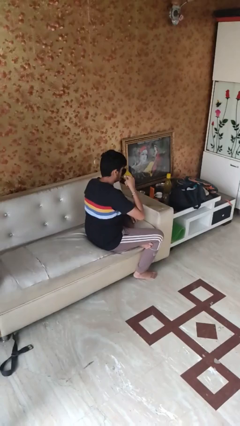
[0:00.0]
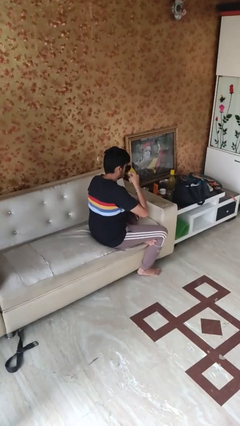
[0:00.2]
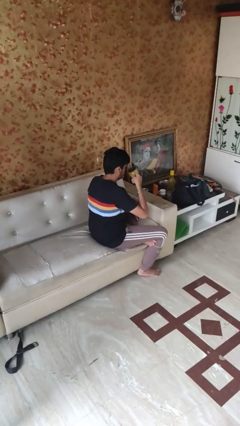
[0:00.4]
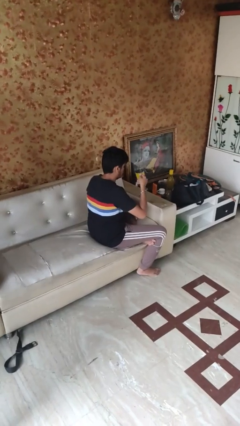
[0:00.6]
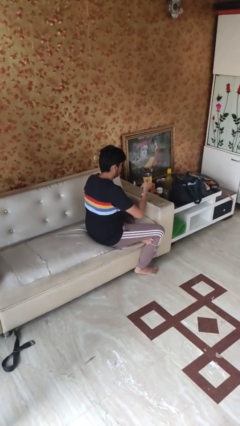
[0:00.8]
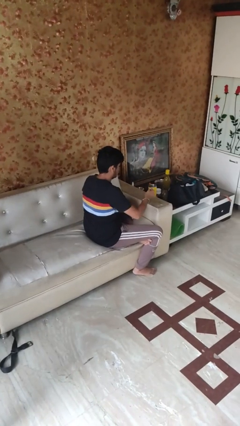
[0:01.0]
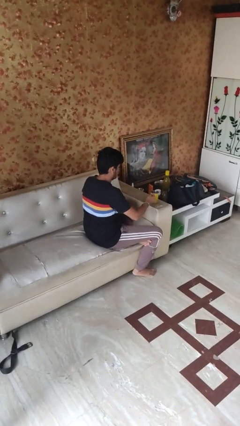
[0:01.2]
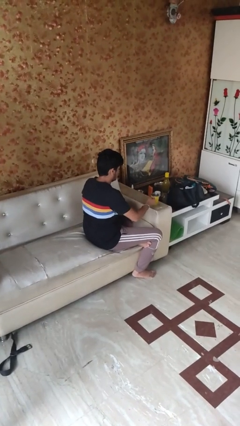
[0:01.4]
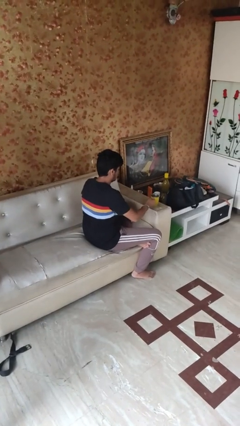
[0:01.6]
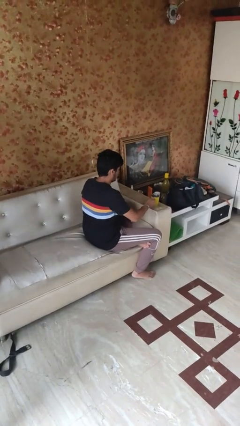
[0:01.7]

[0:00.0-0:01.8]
person puts down object on table

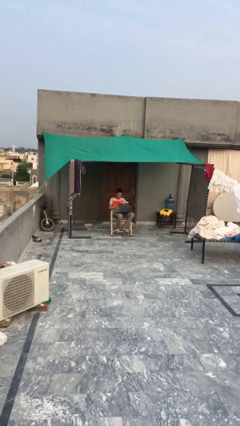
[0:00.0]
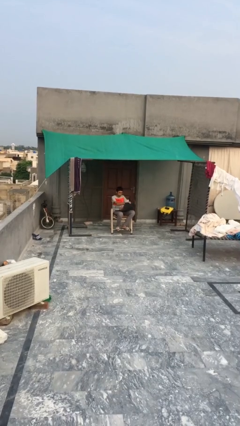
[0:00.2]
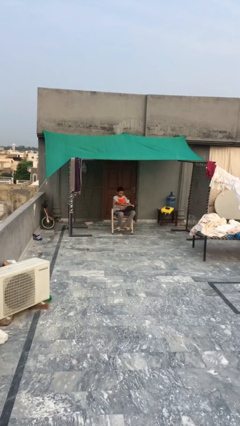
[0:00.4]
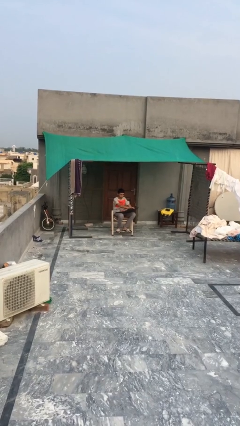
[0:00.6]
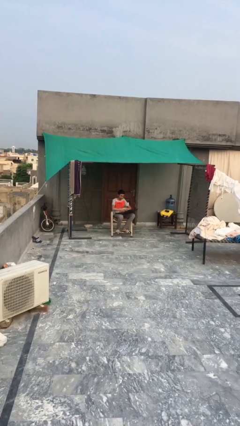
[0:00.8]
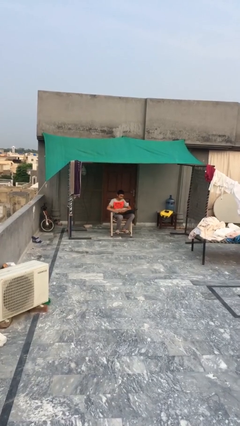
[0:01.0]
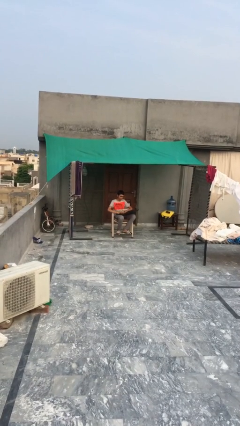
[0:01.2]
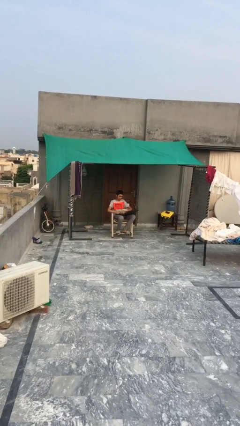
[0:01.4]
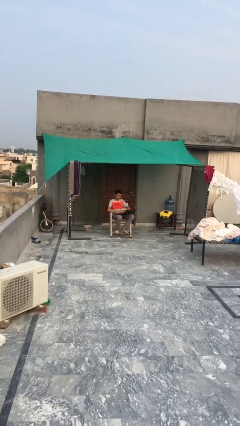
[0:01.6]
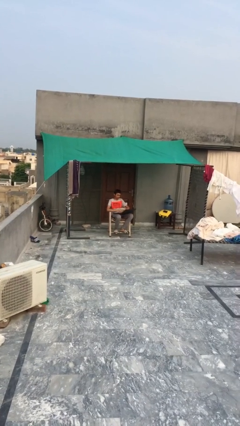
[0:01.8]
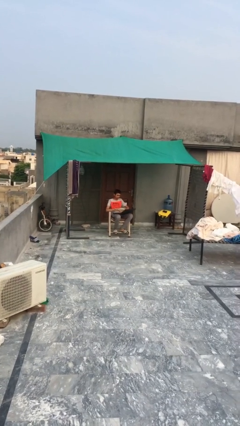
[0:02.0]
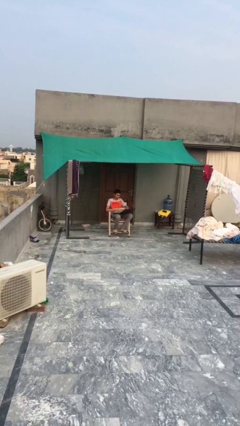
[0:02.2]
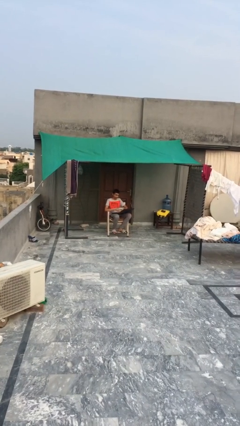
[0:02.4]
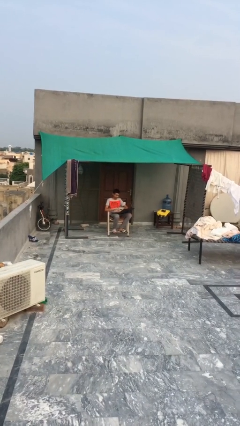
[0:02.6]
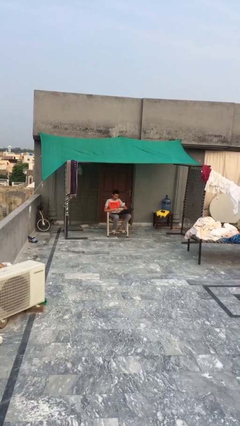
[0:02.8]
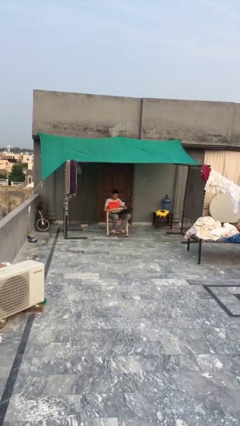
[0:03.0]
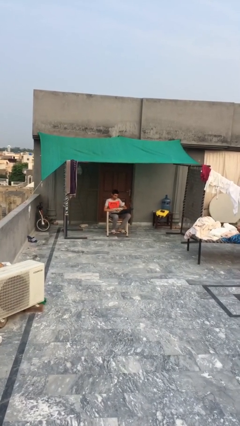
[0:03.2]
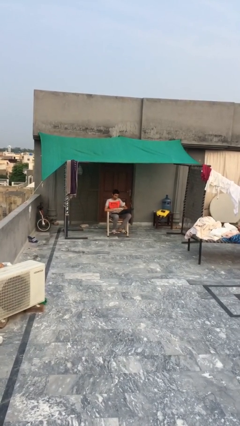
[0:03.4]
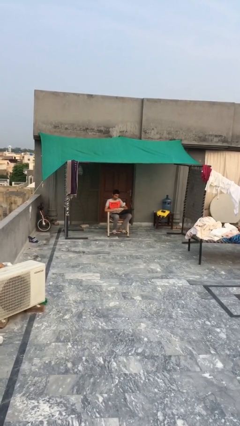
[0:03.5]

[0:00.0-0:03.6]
person interacts with laptop

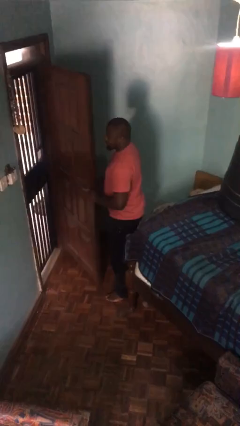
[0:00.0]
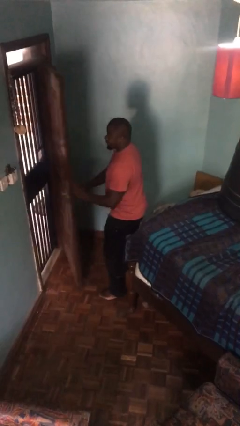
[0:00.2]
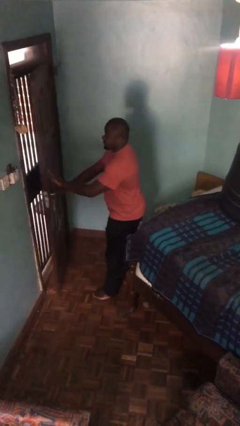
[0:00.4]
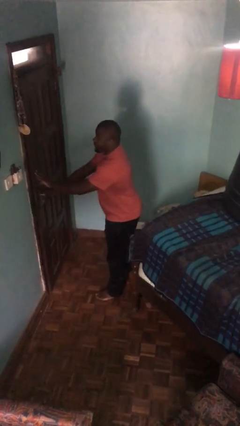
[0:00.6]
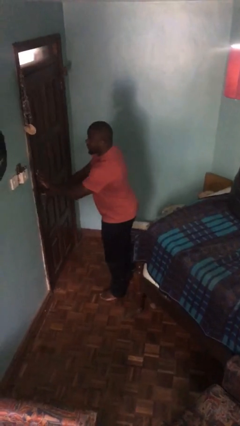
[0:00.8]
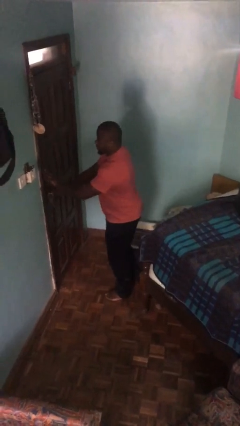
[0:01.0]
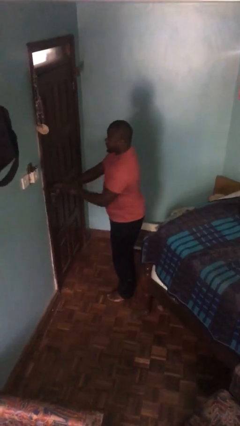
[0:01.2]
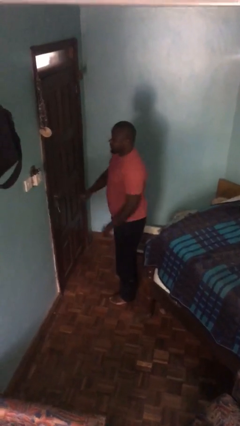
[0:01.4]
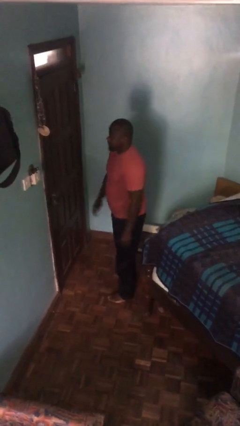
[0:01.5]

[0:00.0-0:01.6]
person closes facility door

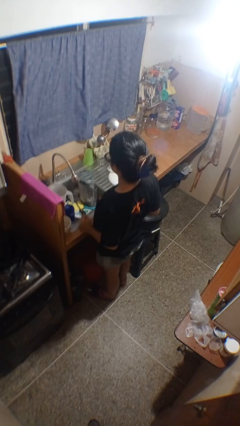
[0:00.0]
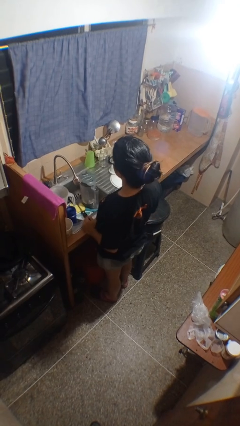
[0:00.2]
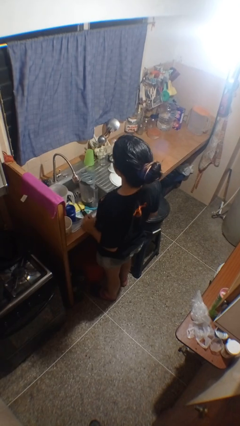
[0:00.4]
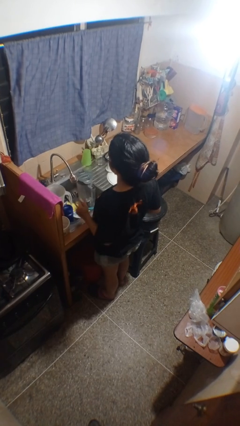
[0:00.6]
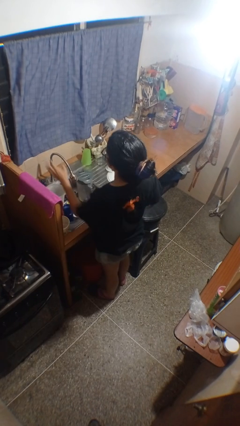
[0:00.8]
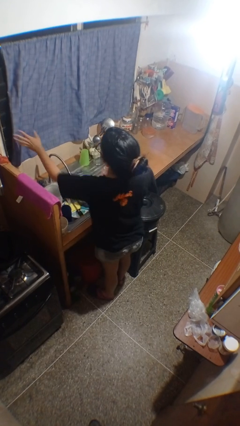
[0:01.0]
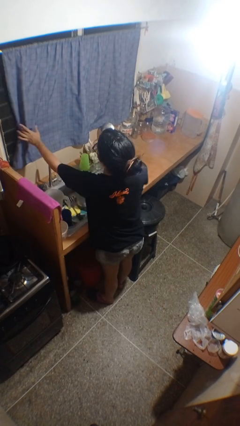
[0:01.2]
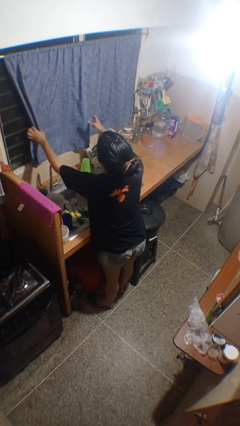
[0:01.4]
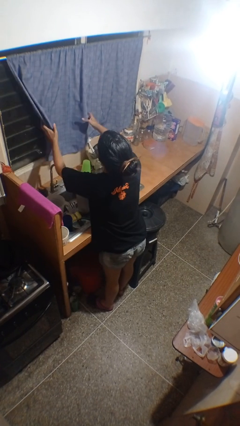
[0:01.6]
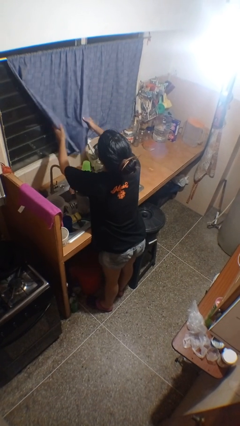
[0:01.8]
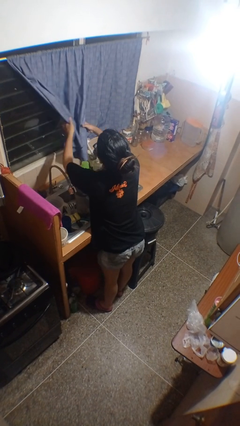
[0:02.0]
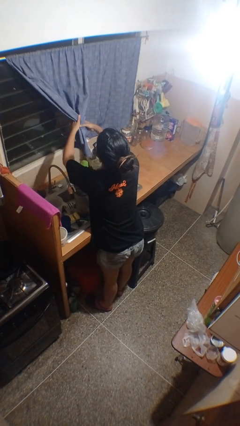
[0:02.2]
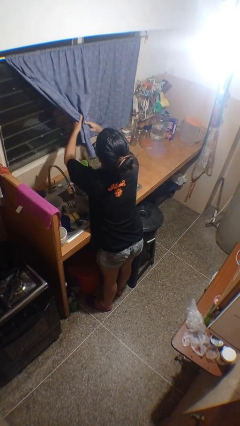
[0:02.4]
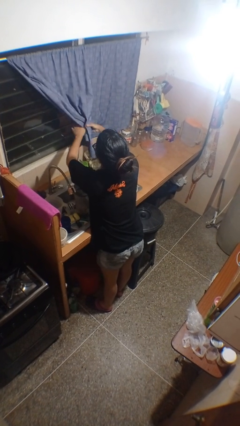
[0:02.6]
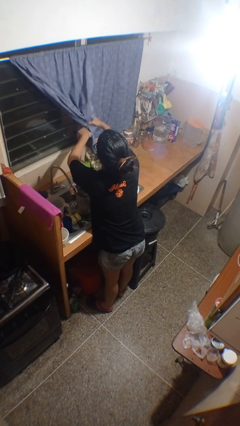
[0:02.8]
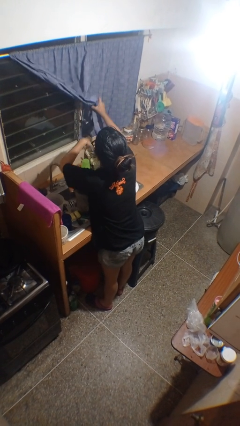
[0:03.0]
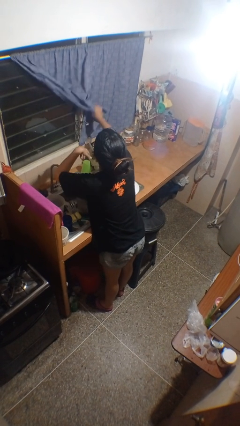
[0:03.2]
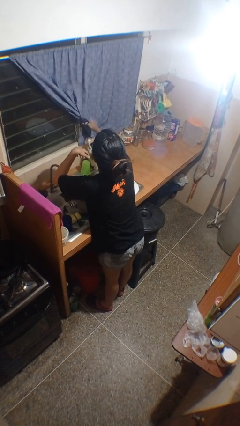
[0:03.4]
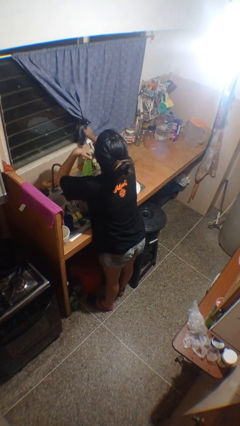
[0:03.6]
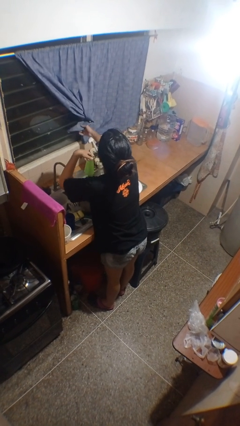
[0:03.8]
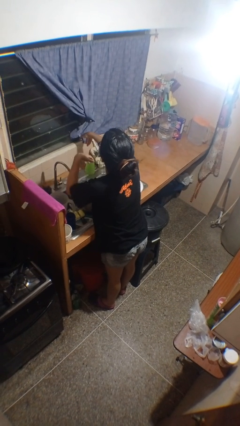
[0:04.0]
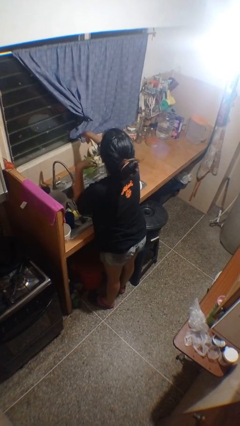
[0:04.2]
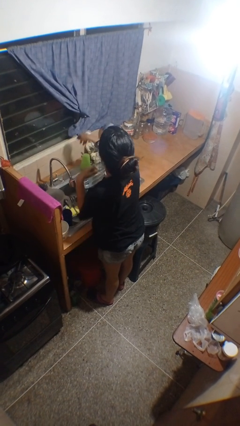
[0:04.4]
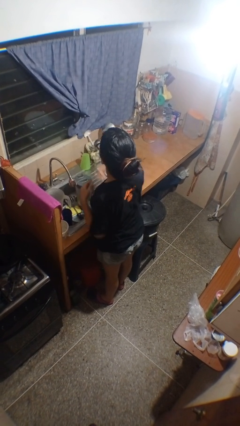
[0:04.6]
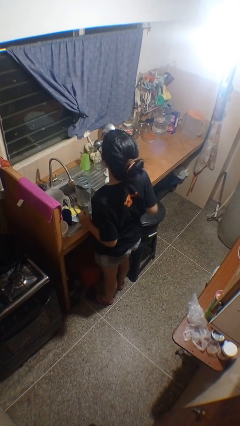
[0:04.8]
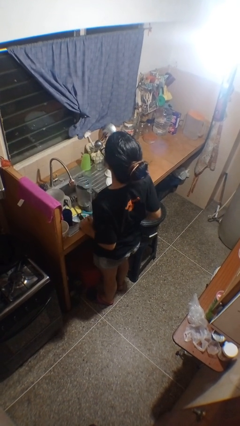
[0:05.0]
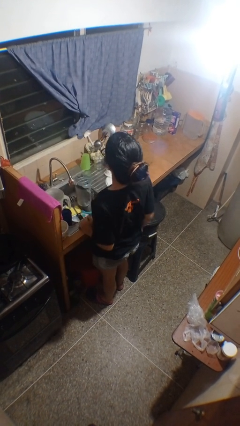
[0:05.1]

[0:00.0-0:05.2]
person opens curtains

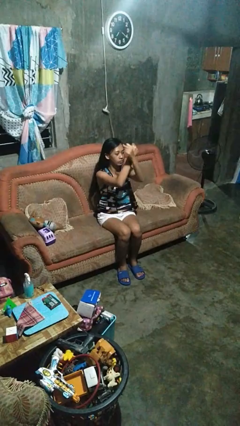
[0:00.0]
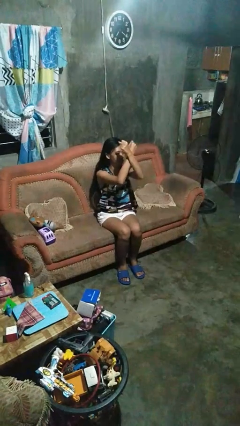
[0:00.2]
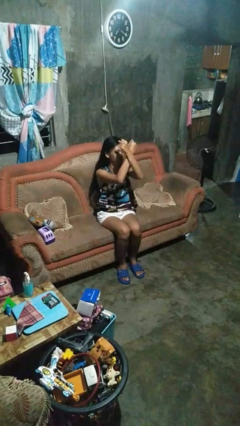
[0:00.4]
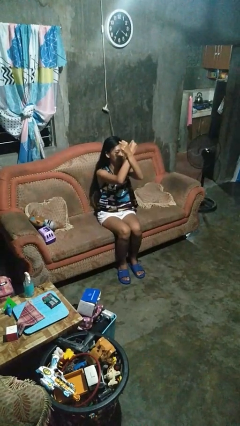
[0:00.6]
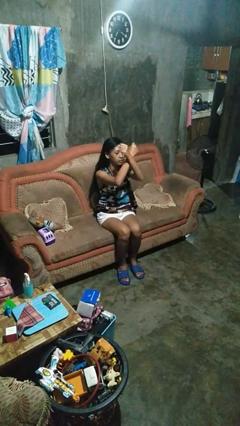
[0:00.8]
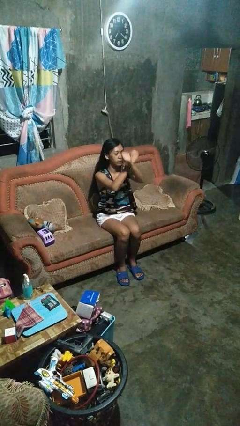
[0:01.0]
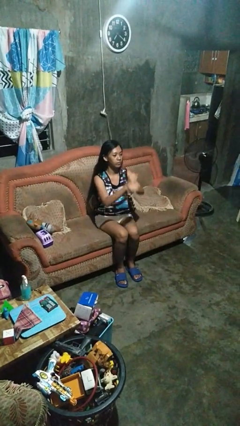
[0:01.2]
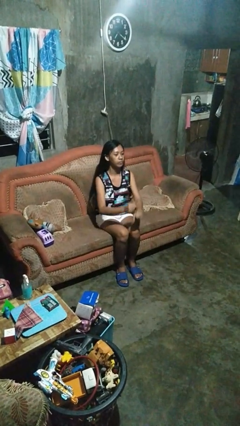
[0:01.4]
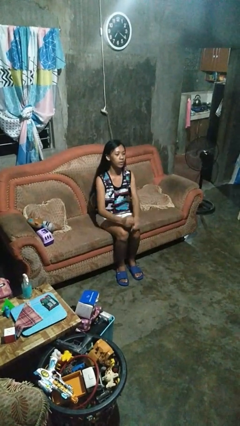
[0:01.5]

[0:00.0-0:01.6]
person gestures arms x

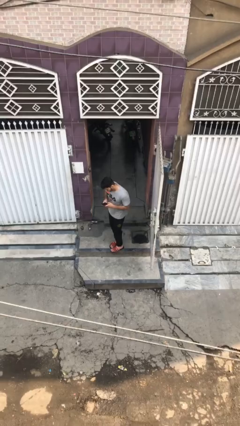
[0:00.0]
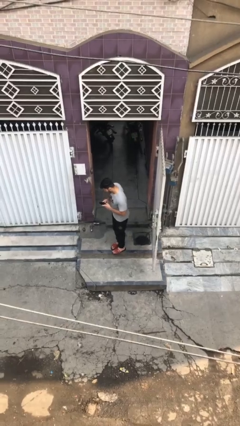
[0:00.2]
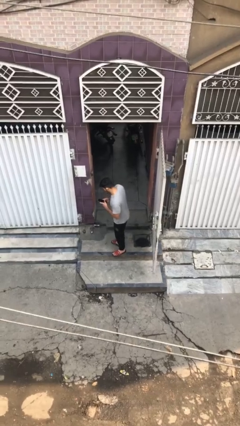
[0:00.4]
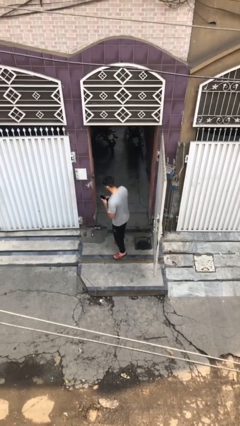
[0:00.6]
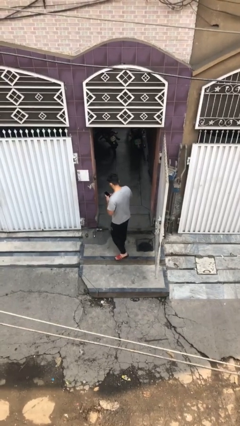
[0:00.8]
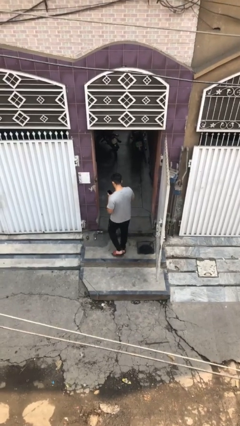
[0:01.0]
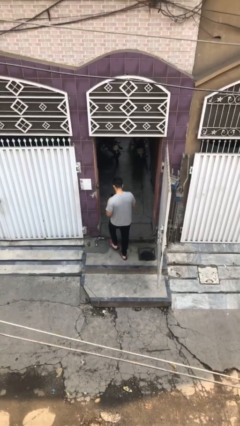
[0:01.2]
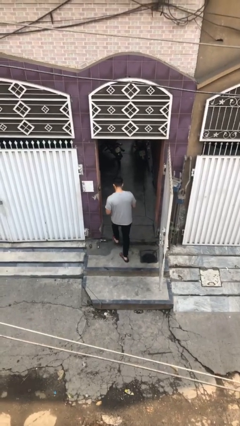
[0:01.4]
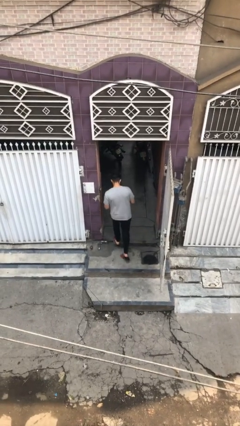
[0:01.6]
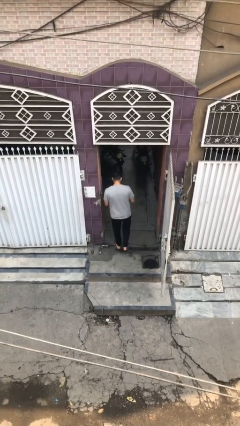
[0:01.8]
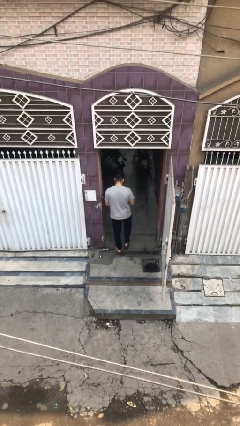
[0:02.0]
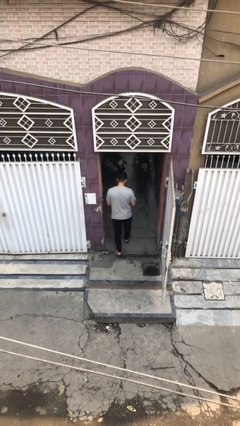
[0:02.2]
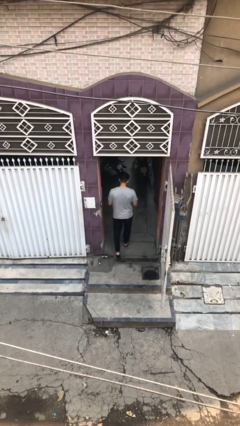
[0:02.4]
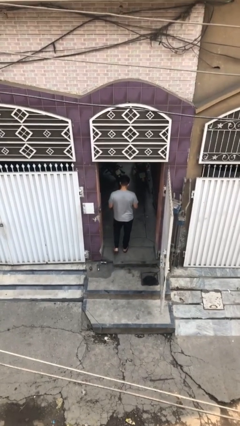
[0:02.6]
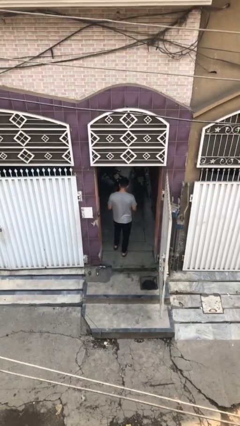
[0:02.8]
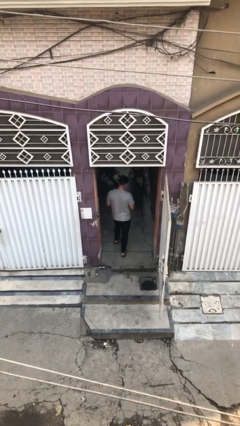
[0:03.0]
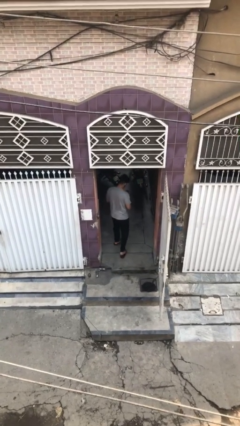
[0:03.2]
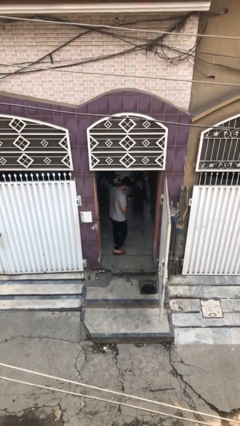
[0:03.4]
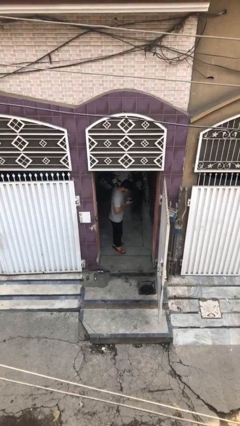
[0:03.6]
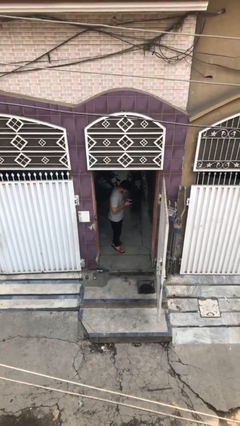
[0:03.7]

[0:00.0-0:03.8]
person exits scene through structure
